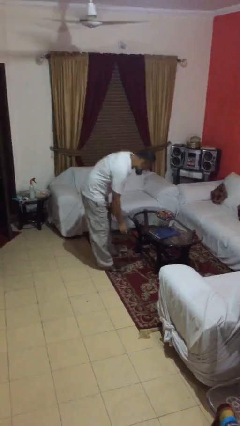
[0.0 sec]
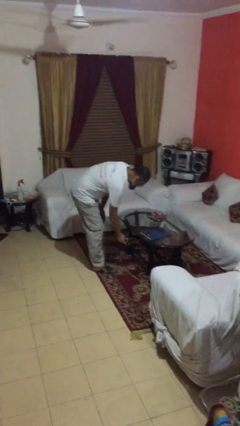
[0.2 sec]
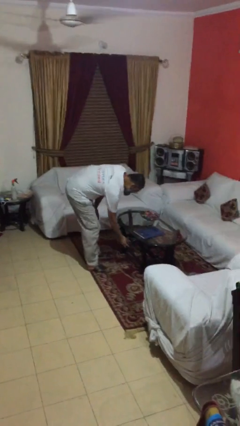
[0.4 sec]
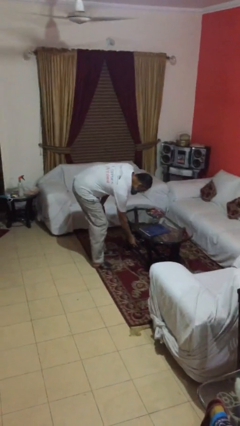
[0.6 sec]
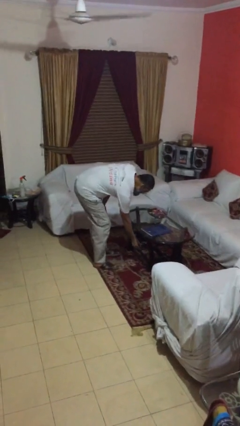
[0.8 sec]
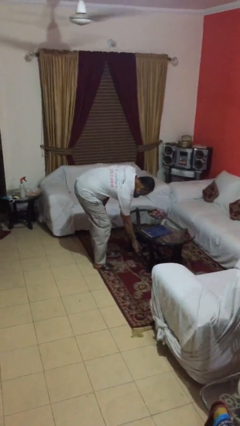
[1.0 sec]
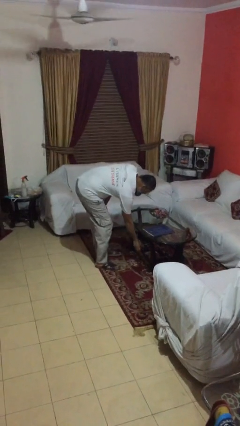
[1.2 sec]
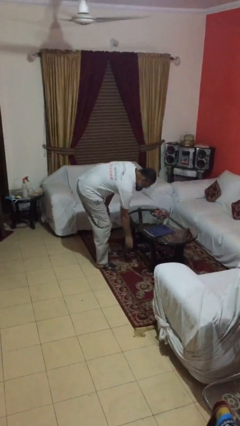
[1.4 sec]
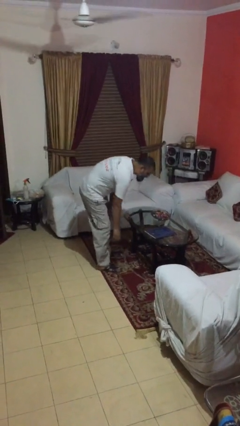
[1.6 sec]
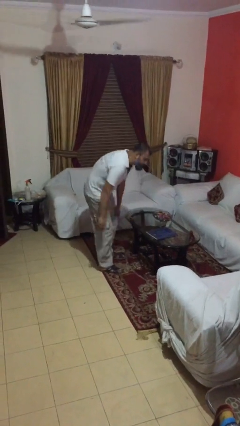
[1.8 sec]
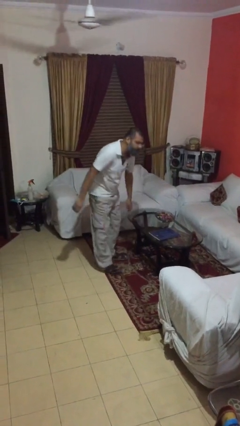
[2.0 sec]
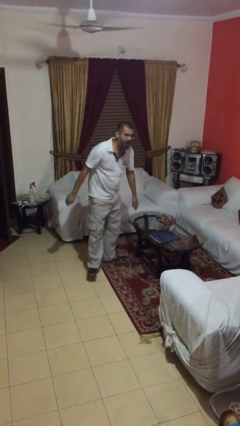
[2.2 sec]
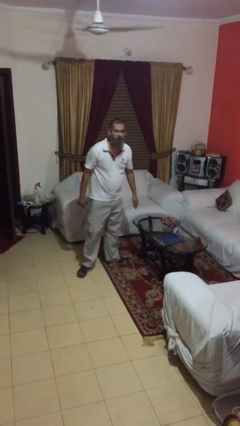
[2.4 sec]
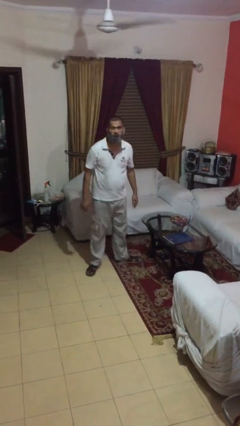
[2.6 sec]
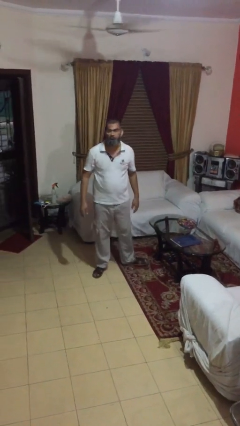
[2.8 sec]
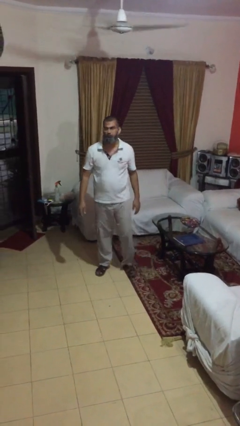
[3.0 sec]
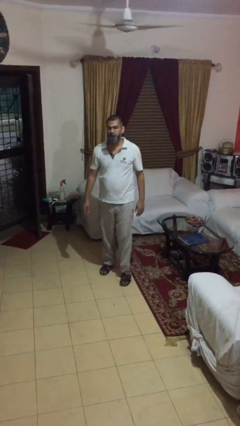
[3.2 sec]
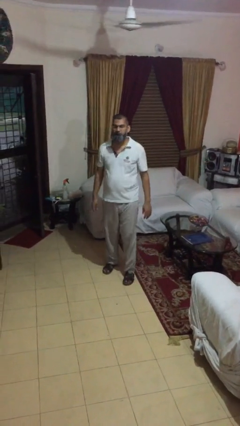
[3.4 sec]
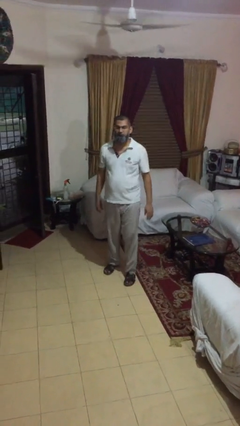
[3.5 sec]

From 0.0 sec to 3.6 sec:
person puts down object on table

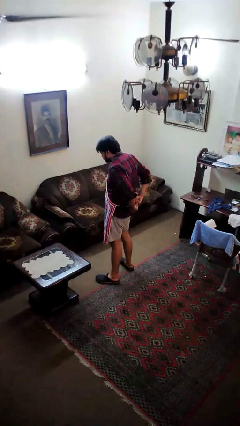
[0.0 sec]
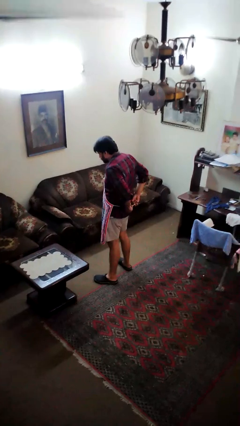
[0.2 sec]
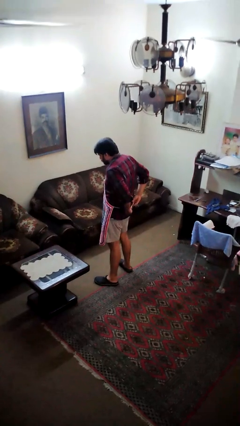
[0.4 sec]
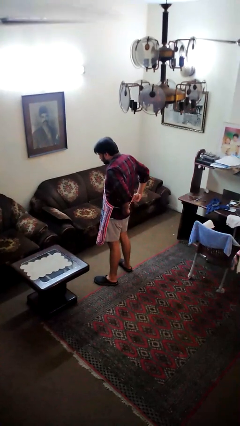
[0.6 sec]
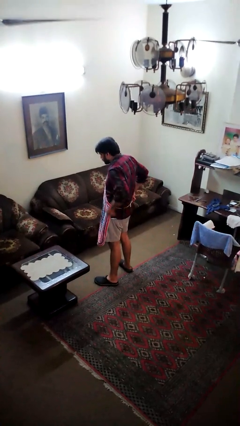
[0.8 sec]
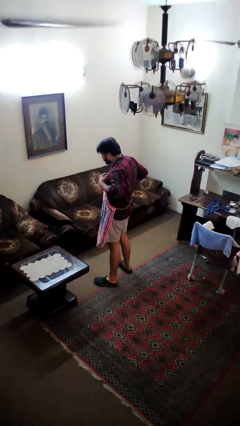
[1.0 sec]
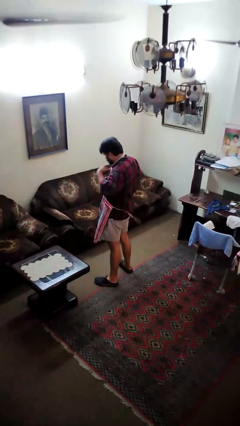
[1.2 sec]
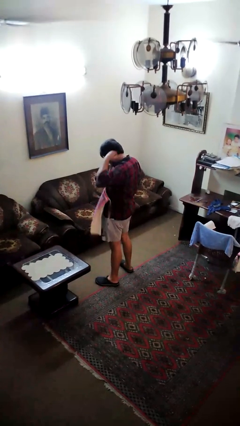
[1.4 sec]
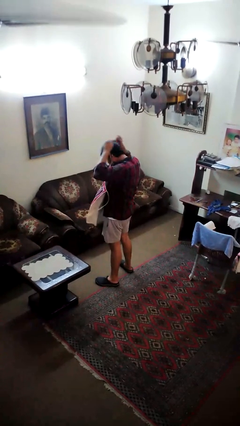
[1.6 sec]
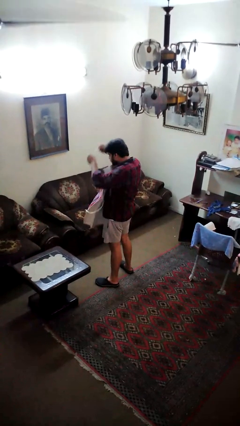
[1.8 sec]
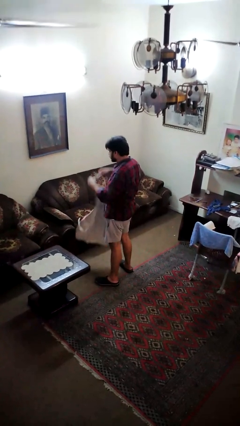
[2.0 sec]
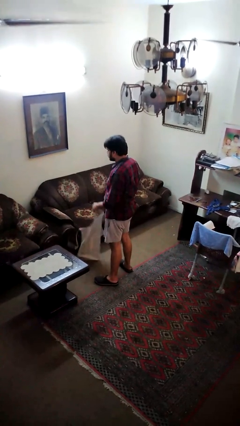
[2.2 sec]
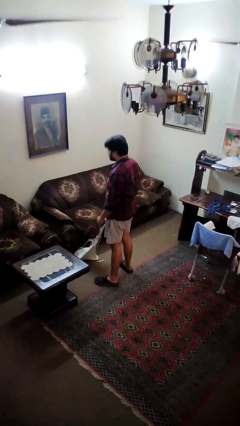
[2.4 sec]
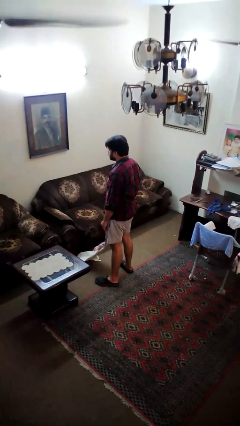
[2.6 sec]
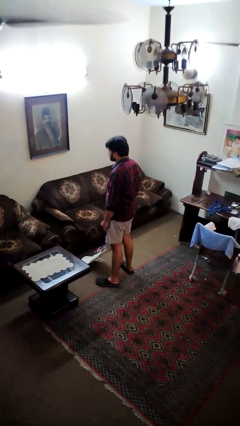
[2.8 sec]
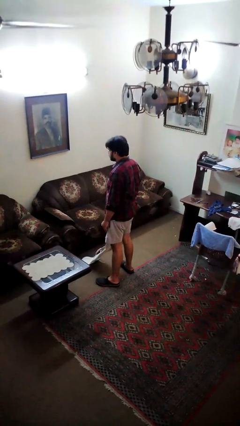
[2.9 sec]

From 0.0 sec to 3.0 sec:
person takes off apron

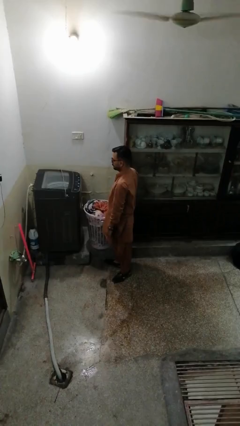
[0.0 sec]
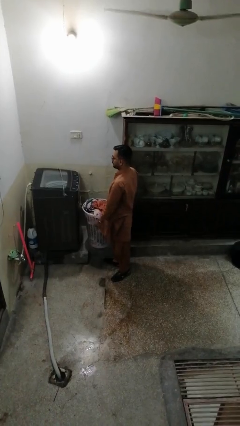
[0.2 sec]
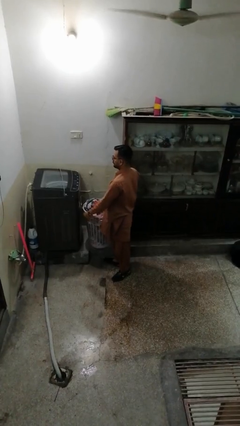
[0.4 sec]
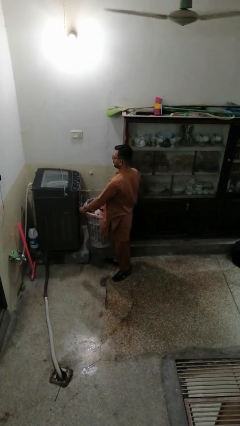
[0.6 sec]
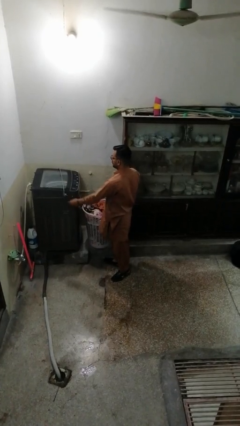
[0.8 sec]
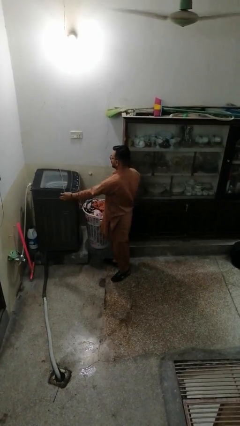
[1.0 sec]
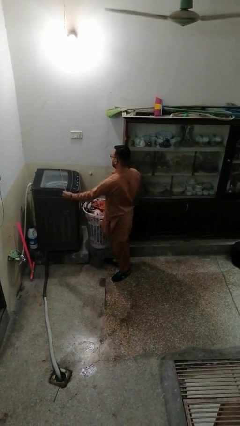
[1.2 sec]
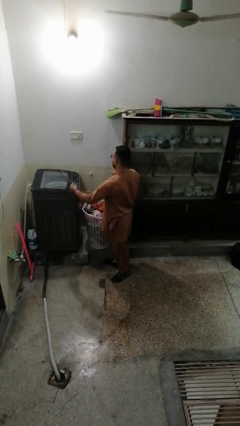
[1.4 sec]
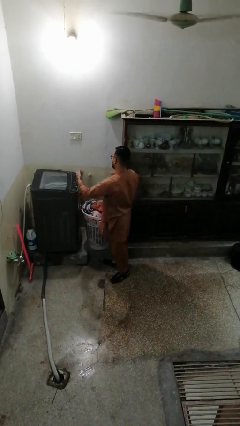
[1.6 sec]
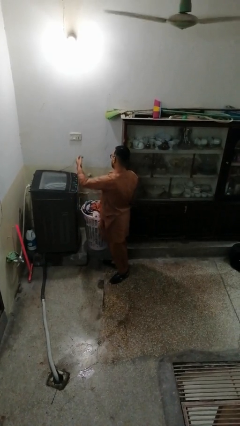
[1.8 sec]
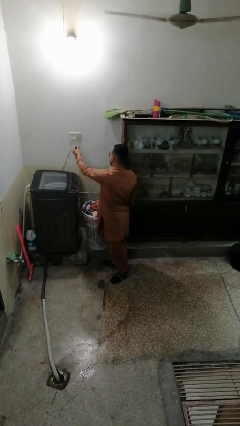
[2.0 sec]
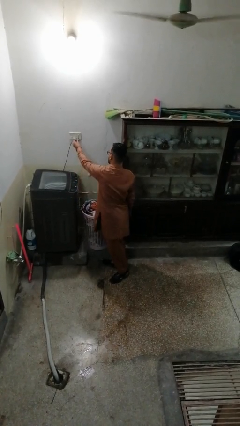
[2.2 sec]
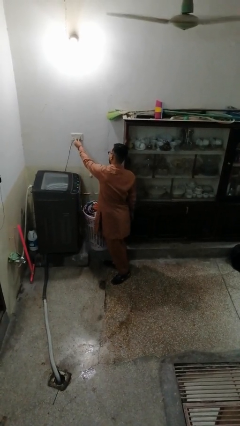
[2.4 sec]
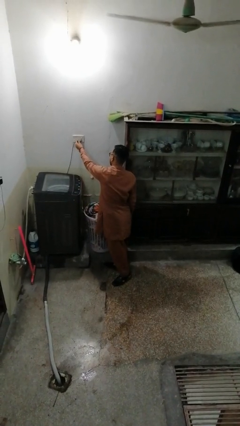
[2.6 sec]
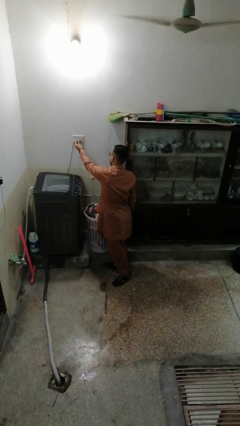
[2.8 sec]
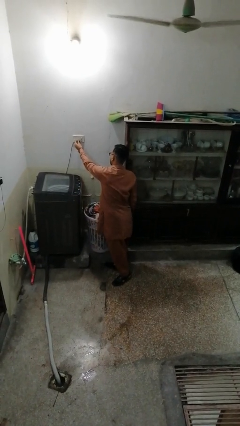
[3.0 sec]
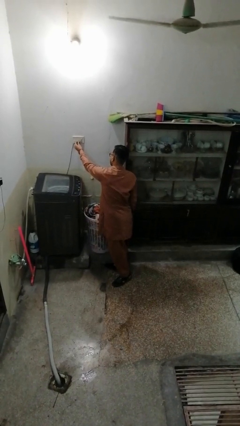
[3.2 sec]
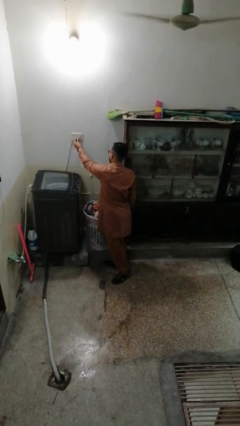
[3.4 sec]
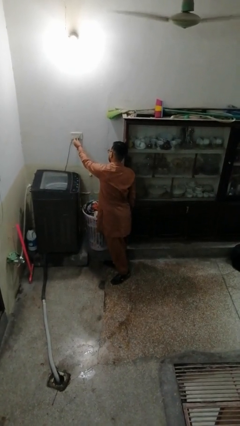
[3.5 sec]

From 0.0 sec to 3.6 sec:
person plugs into electrical socket

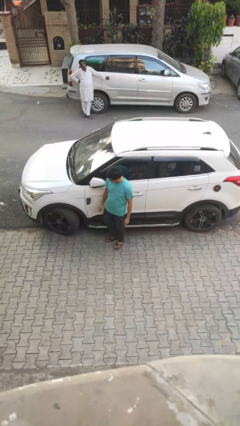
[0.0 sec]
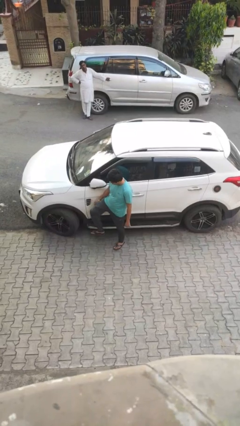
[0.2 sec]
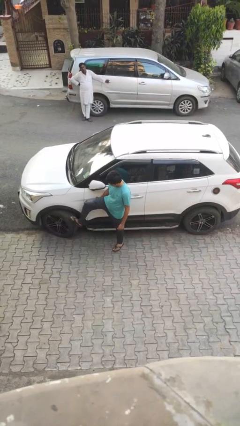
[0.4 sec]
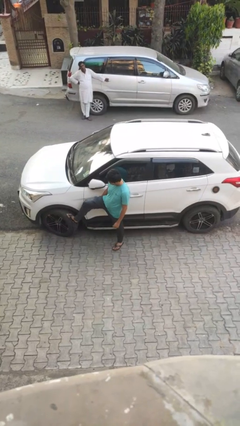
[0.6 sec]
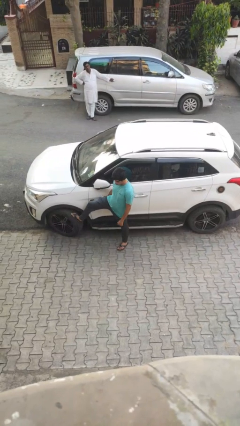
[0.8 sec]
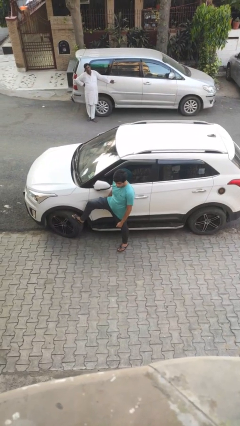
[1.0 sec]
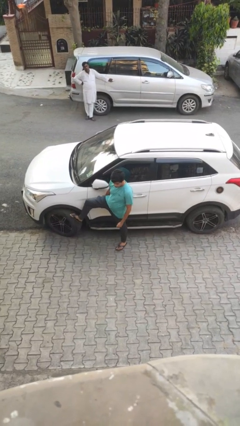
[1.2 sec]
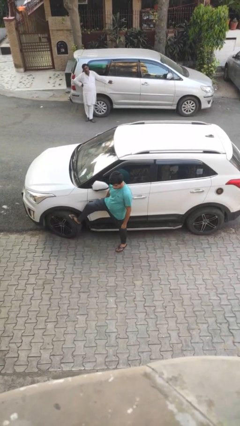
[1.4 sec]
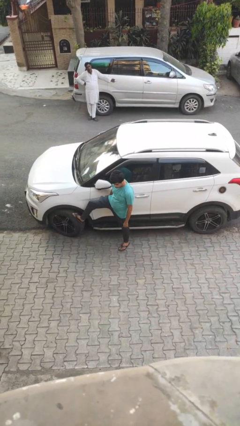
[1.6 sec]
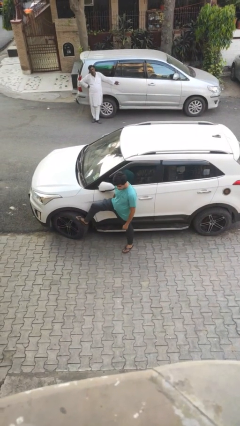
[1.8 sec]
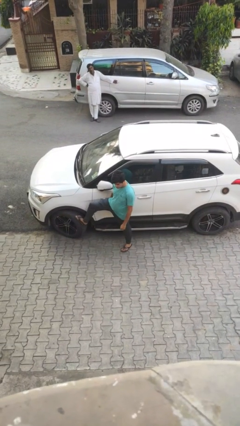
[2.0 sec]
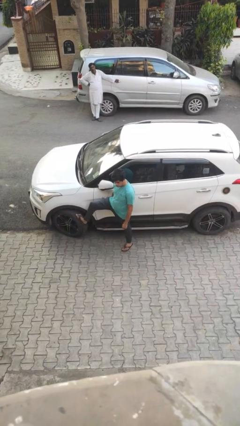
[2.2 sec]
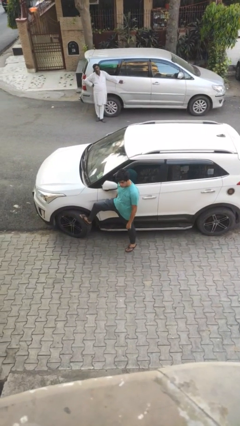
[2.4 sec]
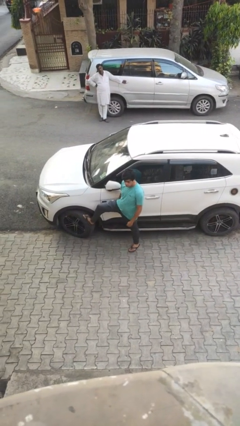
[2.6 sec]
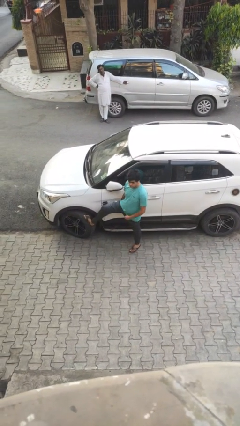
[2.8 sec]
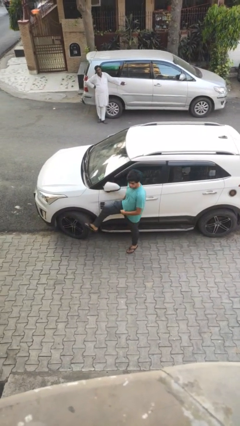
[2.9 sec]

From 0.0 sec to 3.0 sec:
person kicks car tires

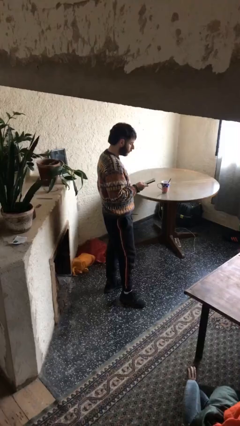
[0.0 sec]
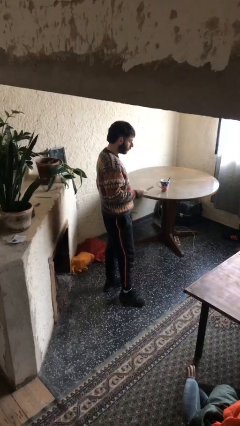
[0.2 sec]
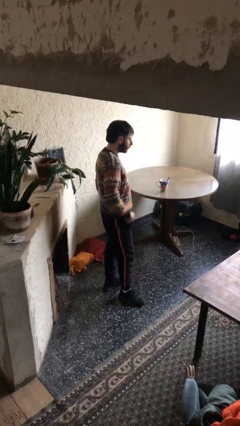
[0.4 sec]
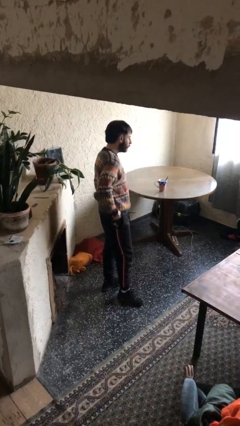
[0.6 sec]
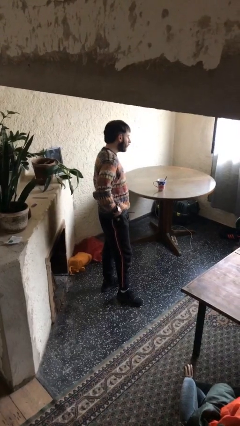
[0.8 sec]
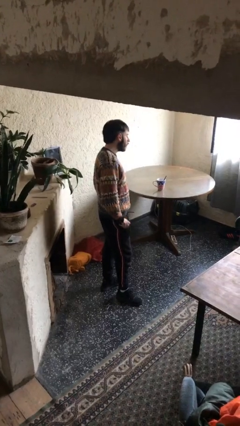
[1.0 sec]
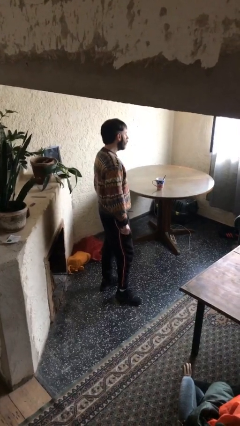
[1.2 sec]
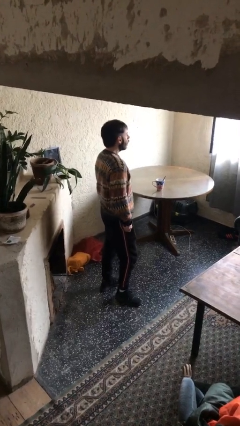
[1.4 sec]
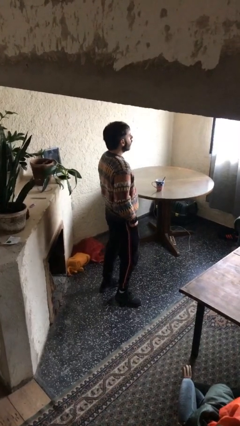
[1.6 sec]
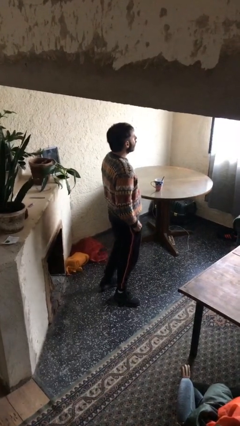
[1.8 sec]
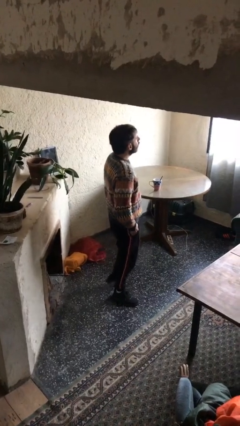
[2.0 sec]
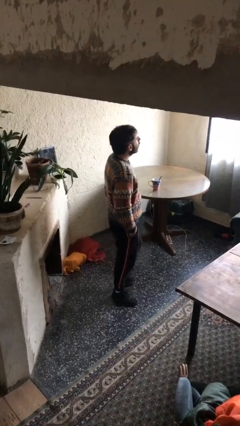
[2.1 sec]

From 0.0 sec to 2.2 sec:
person puts phone into pocket

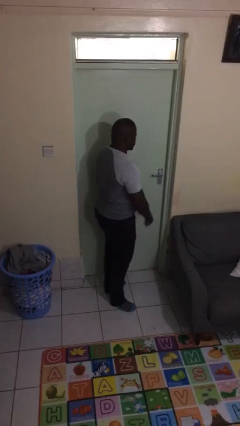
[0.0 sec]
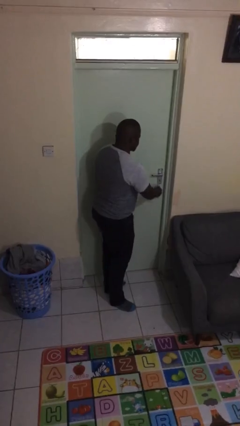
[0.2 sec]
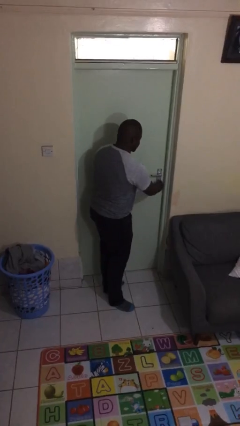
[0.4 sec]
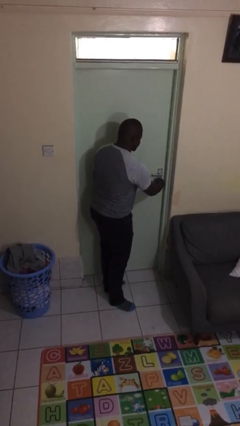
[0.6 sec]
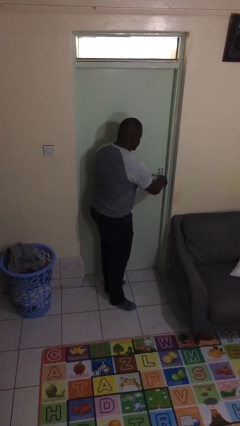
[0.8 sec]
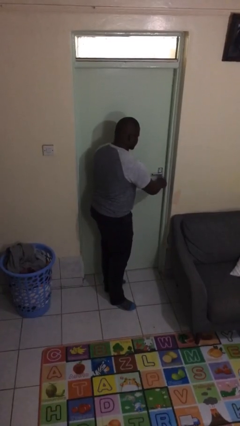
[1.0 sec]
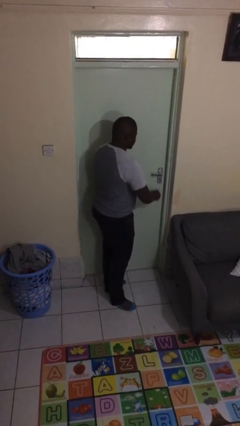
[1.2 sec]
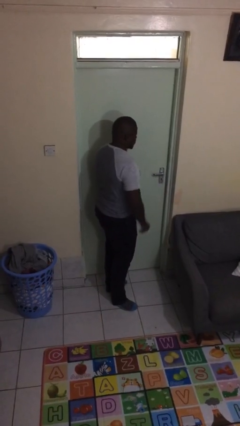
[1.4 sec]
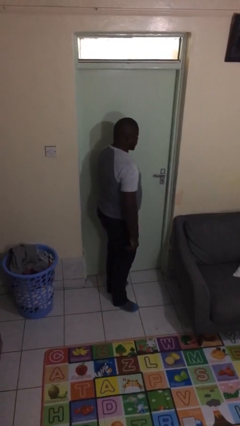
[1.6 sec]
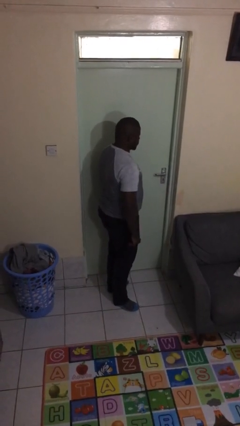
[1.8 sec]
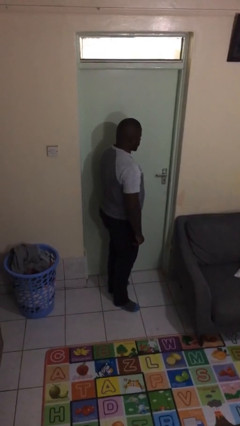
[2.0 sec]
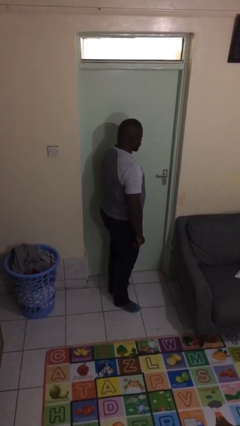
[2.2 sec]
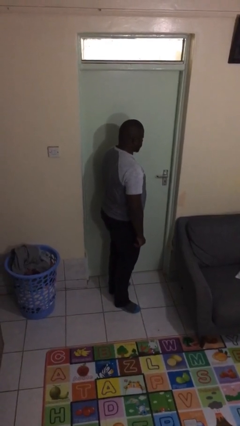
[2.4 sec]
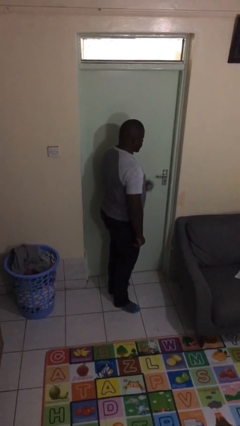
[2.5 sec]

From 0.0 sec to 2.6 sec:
person unlocks door with keys
